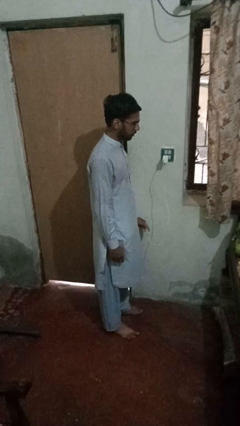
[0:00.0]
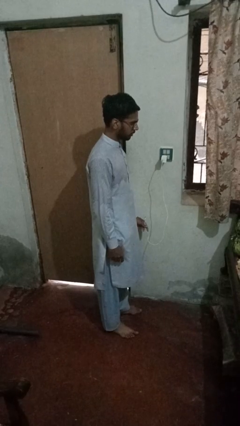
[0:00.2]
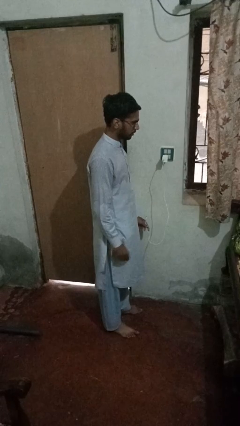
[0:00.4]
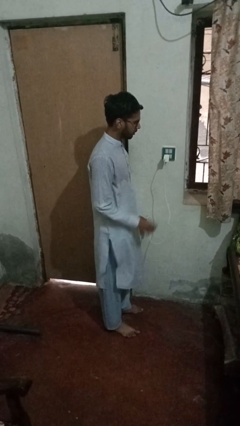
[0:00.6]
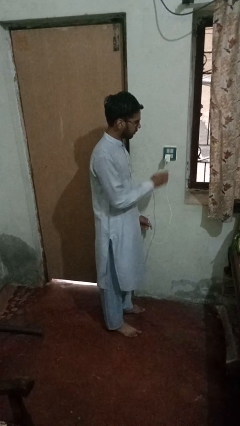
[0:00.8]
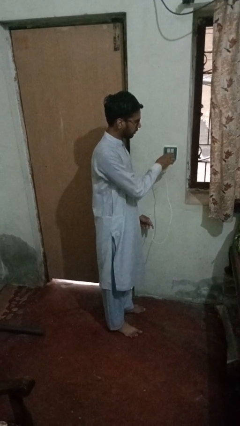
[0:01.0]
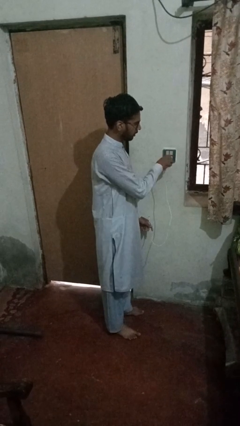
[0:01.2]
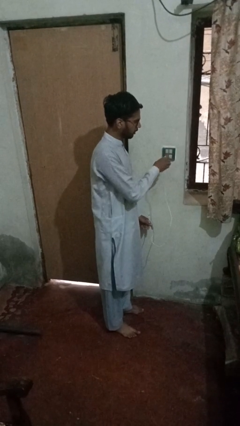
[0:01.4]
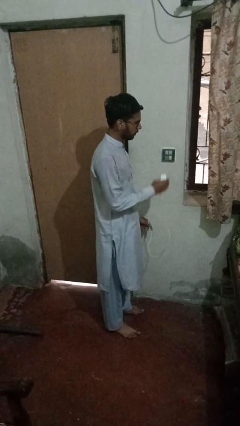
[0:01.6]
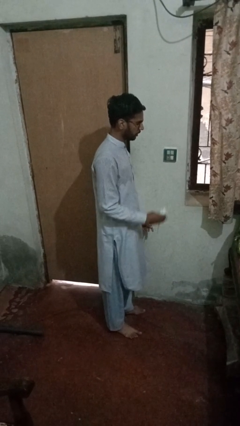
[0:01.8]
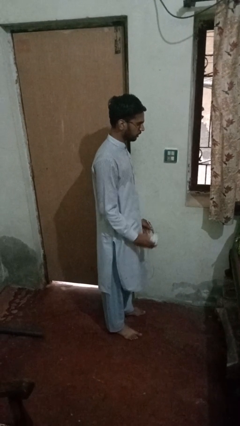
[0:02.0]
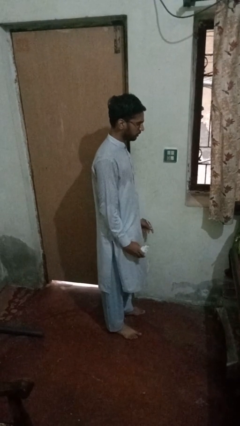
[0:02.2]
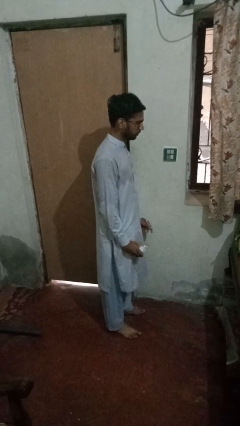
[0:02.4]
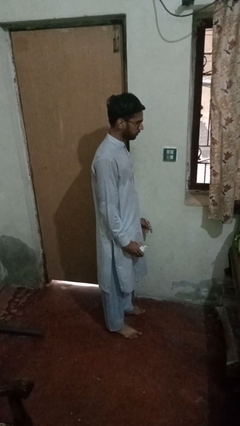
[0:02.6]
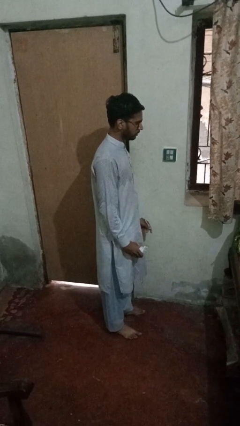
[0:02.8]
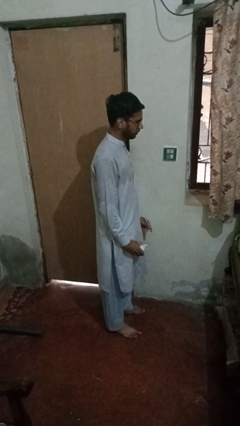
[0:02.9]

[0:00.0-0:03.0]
person unplugs from electrical socket

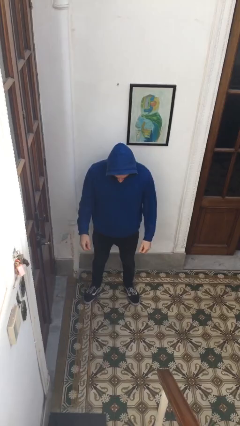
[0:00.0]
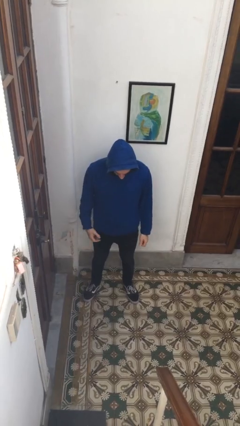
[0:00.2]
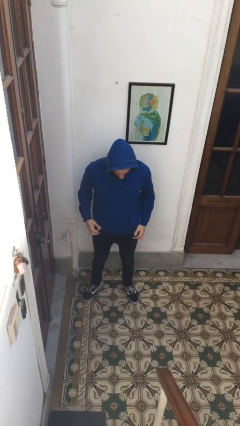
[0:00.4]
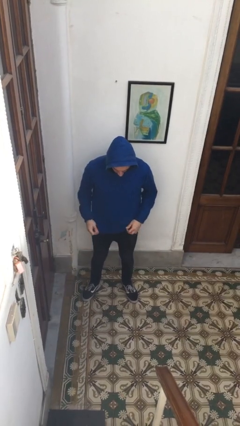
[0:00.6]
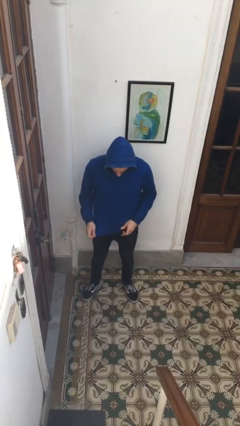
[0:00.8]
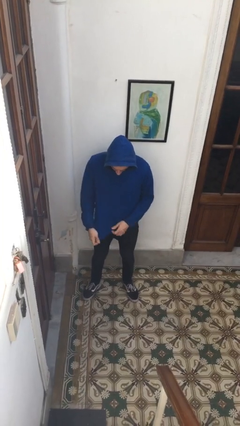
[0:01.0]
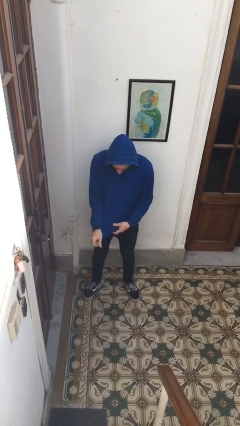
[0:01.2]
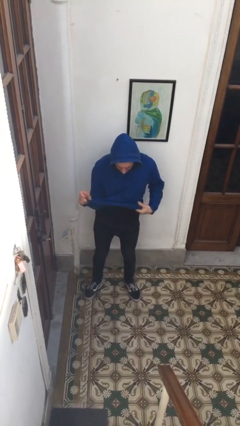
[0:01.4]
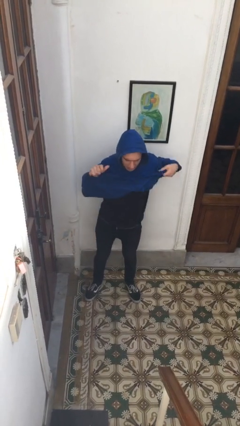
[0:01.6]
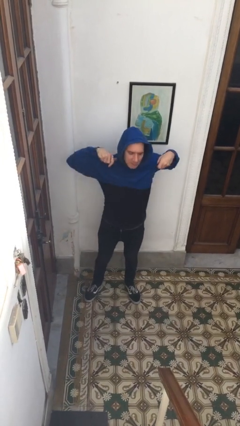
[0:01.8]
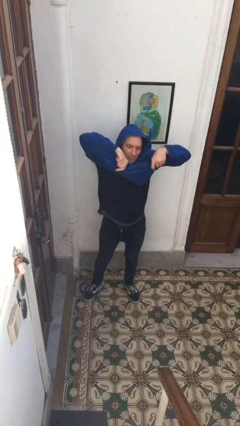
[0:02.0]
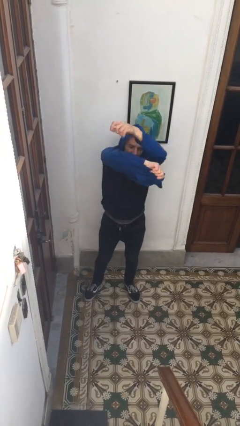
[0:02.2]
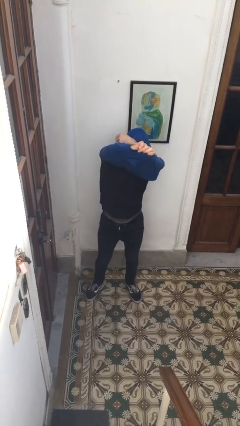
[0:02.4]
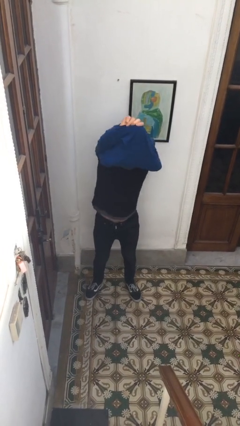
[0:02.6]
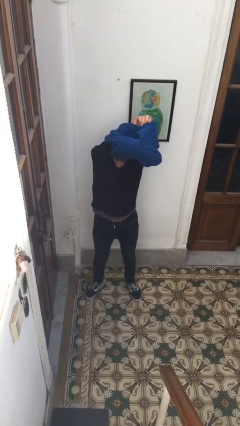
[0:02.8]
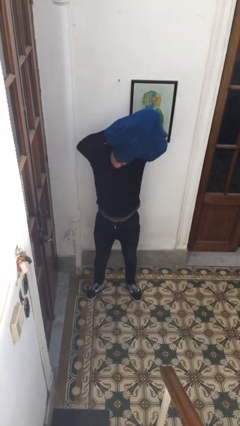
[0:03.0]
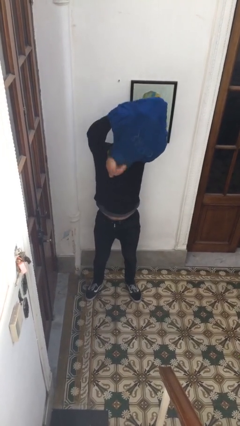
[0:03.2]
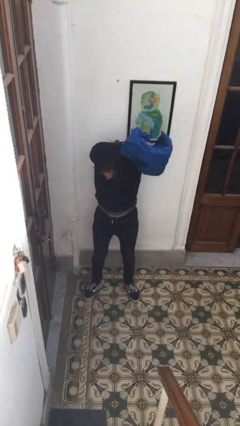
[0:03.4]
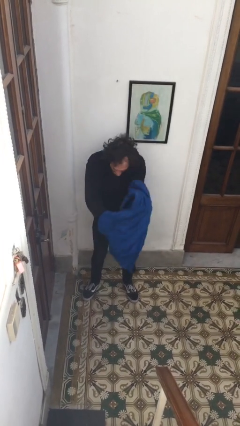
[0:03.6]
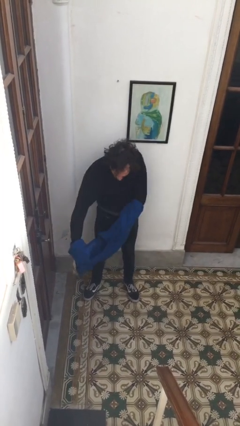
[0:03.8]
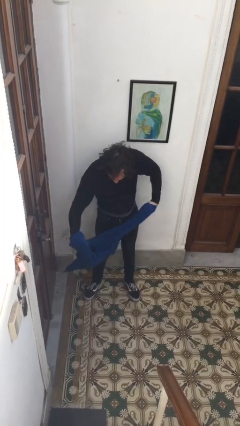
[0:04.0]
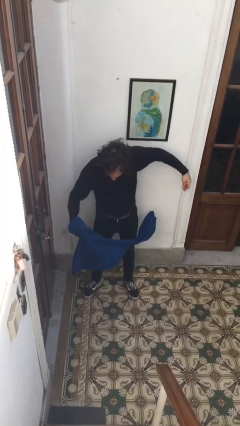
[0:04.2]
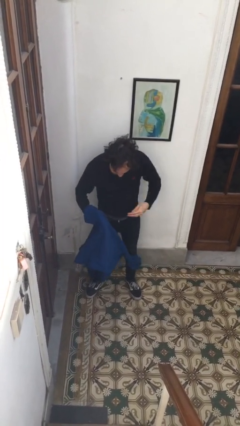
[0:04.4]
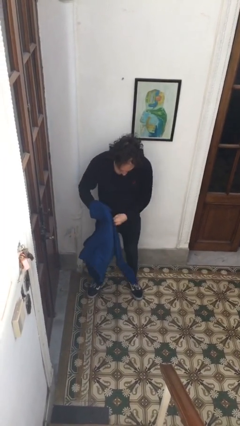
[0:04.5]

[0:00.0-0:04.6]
person takes off hoodie

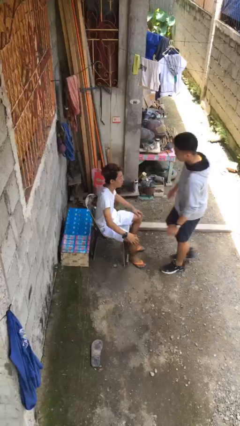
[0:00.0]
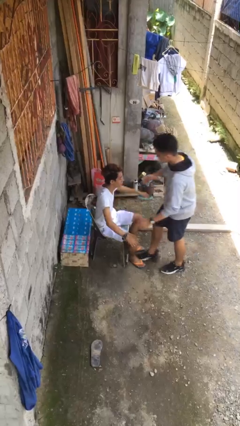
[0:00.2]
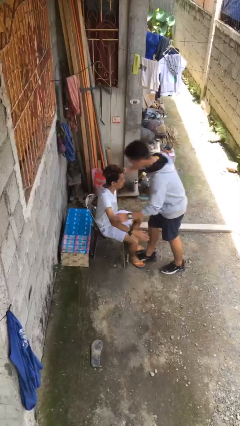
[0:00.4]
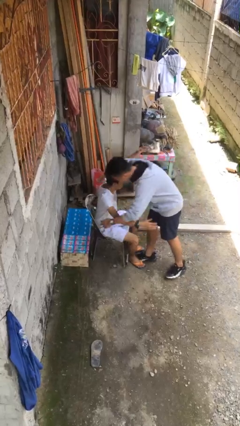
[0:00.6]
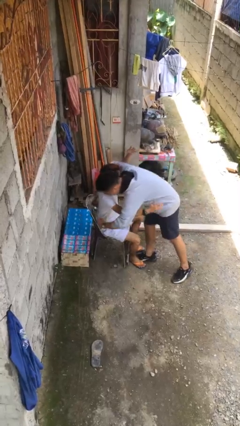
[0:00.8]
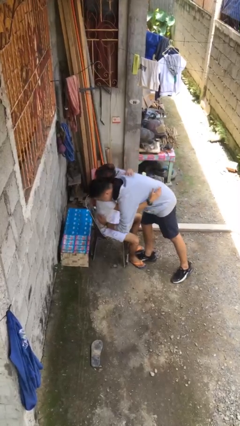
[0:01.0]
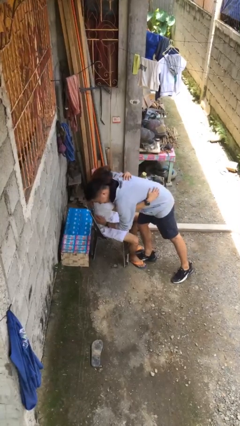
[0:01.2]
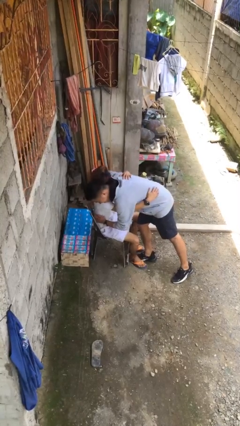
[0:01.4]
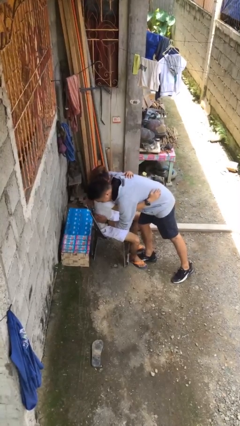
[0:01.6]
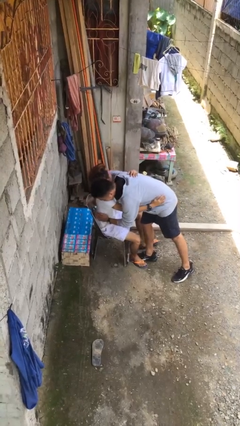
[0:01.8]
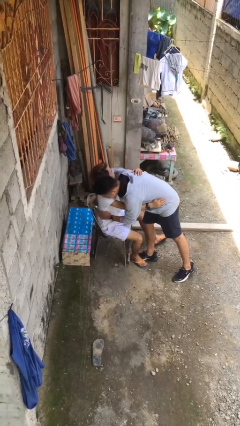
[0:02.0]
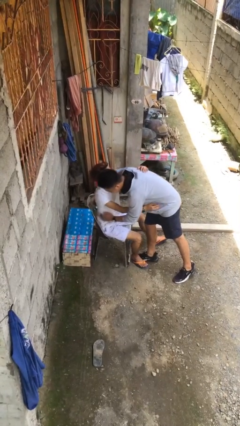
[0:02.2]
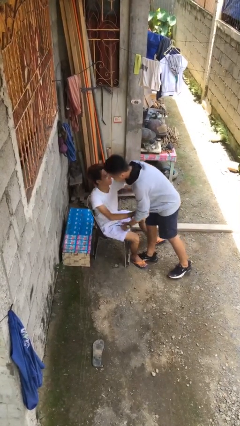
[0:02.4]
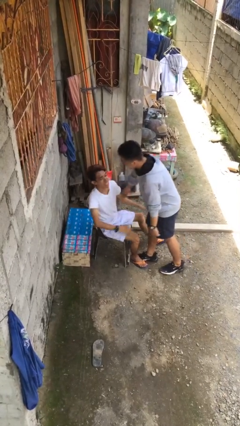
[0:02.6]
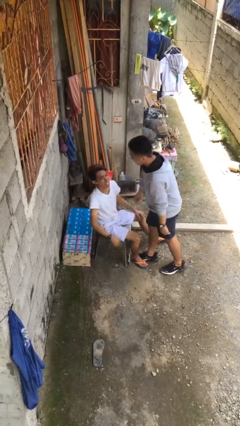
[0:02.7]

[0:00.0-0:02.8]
person embraces person

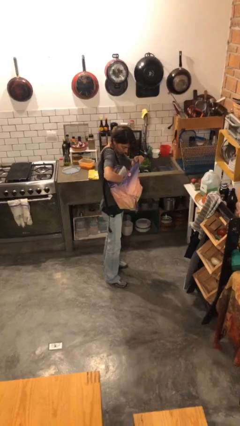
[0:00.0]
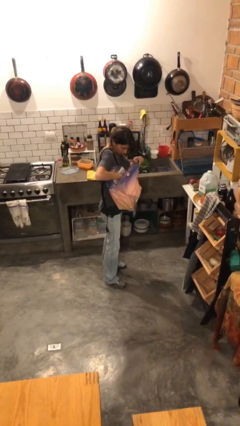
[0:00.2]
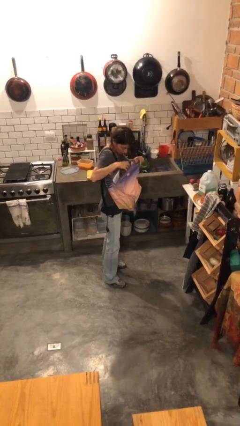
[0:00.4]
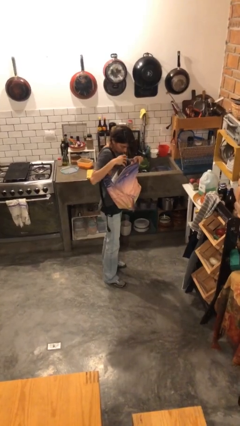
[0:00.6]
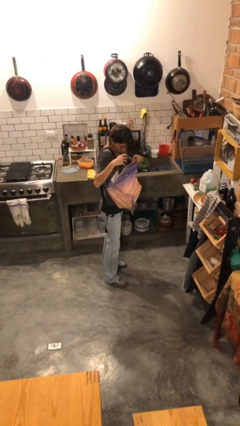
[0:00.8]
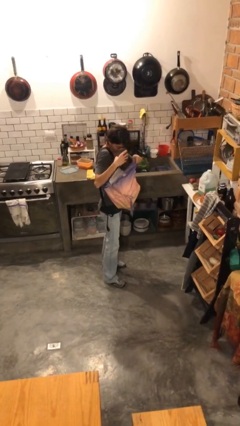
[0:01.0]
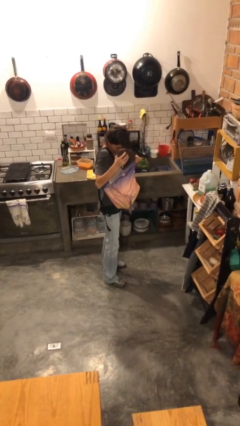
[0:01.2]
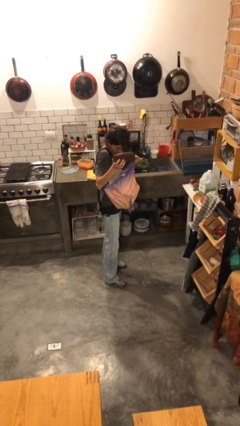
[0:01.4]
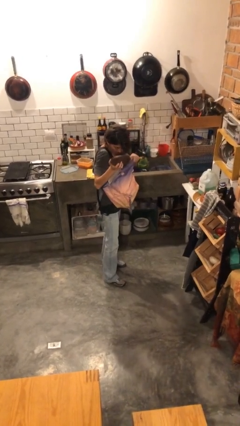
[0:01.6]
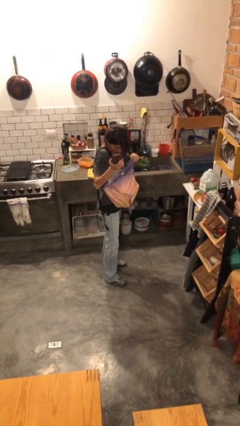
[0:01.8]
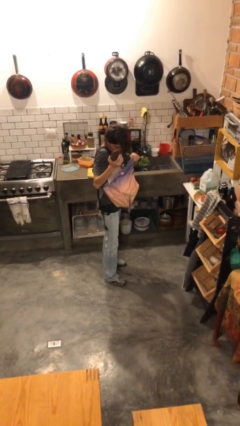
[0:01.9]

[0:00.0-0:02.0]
person takes object from backpack

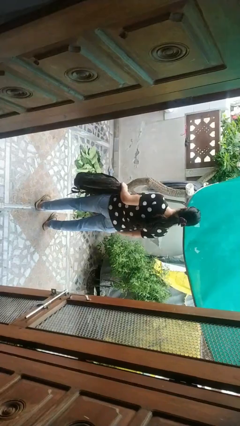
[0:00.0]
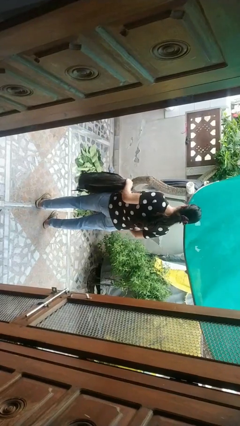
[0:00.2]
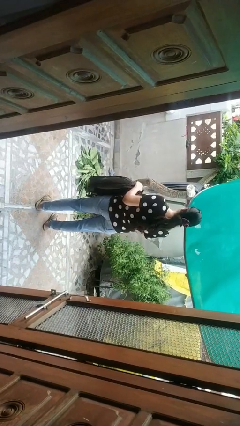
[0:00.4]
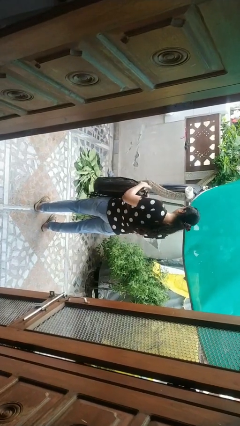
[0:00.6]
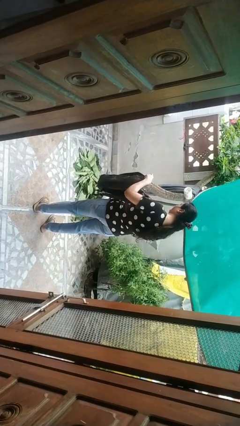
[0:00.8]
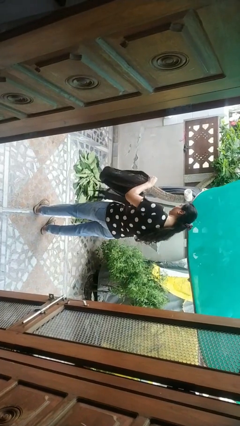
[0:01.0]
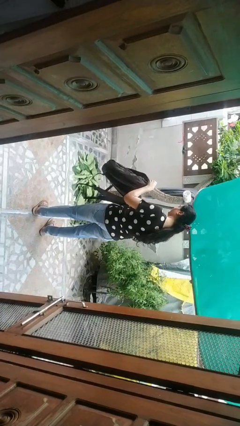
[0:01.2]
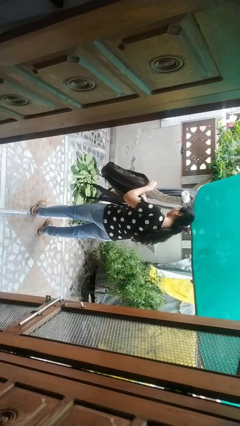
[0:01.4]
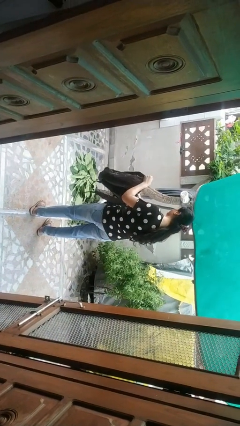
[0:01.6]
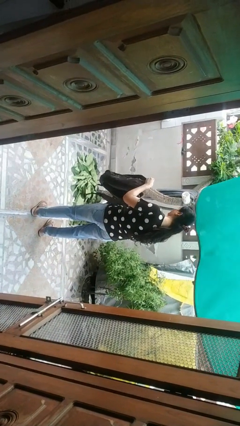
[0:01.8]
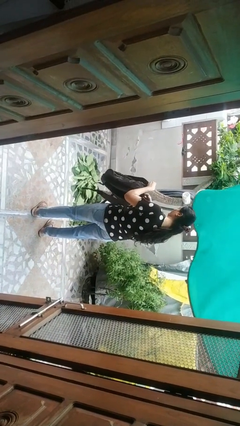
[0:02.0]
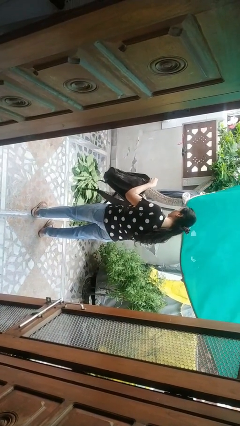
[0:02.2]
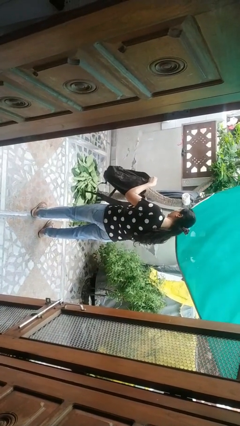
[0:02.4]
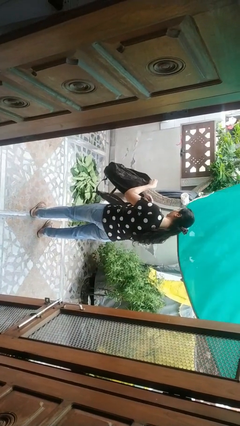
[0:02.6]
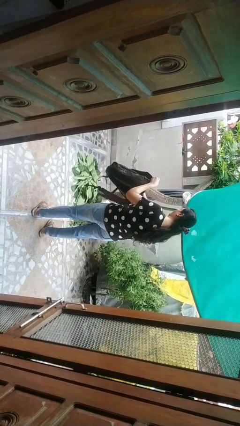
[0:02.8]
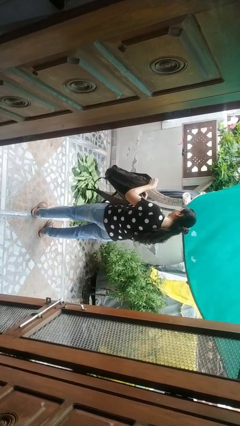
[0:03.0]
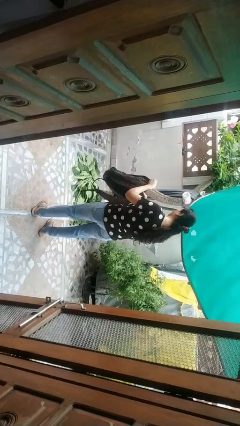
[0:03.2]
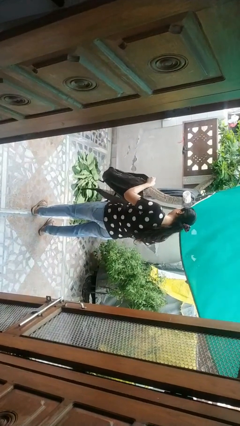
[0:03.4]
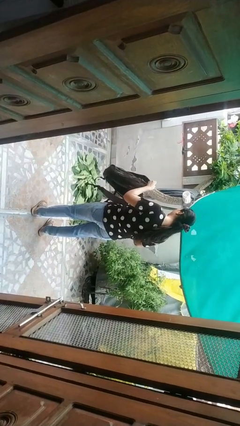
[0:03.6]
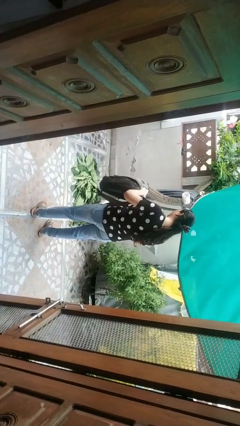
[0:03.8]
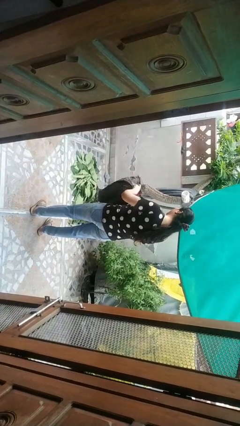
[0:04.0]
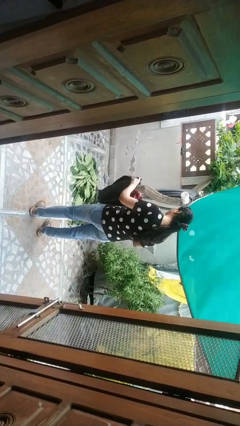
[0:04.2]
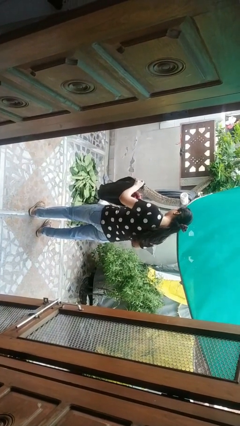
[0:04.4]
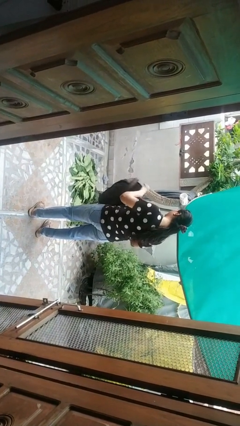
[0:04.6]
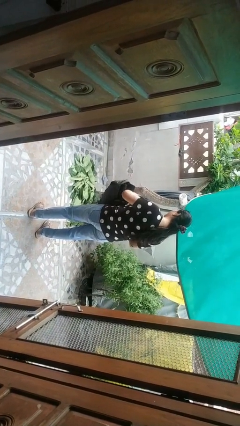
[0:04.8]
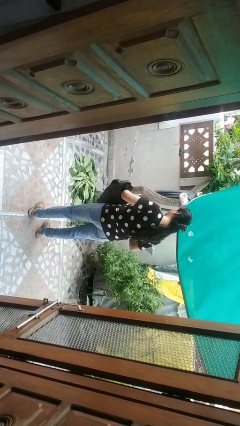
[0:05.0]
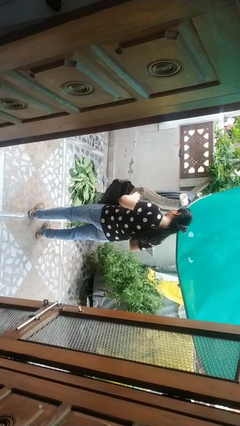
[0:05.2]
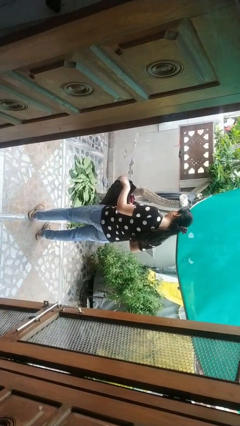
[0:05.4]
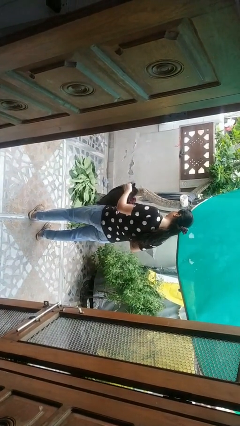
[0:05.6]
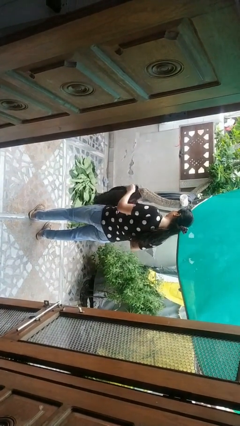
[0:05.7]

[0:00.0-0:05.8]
person searches in backpack
